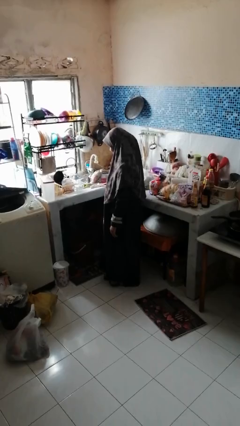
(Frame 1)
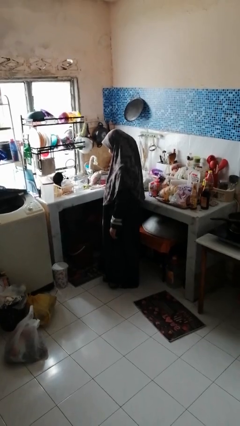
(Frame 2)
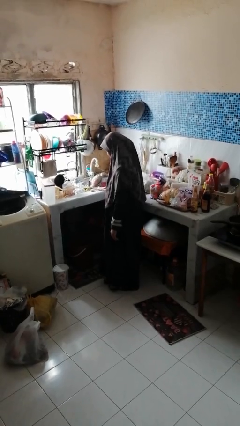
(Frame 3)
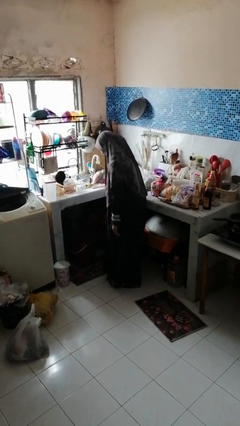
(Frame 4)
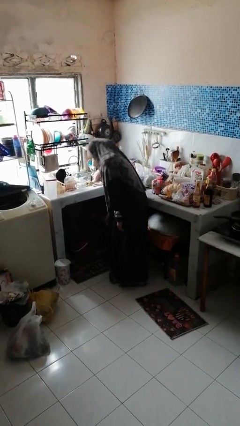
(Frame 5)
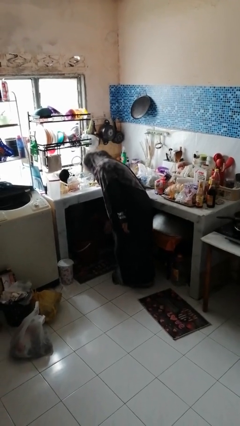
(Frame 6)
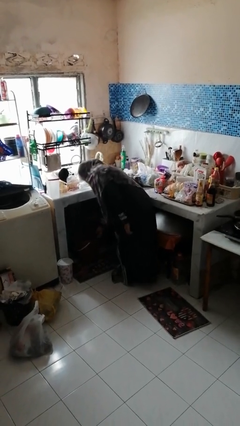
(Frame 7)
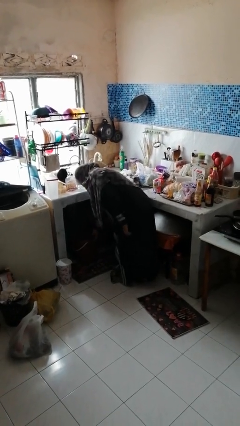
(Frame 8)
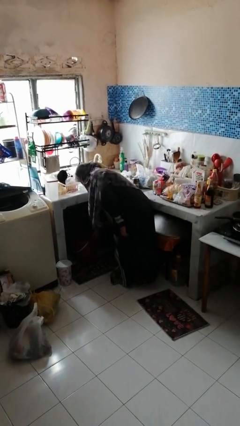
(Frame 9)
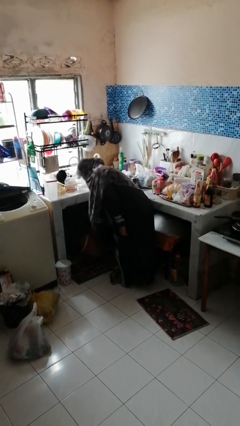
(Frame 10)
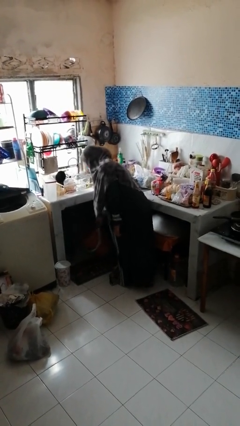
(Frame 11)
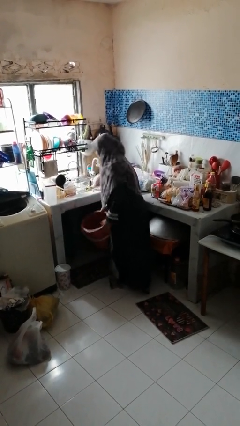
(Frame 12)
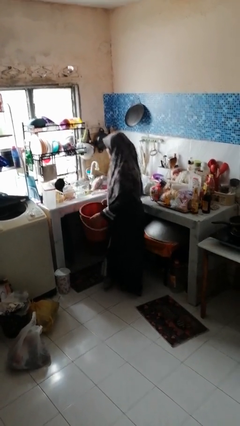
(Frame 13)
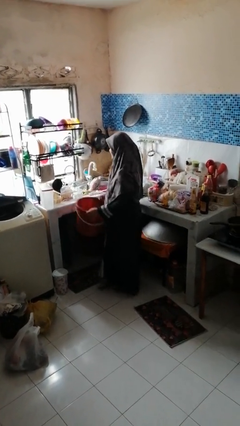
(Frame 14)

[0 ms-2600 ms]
person picks up object from cabinet

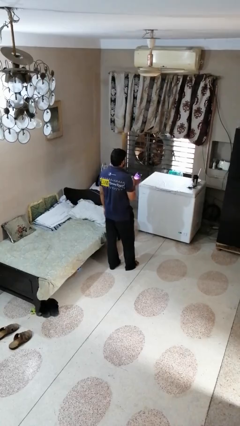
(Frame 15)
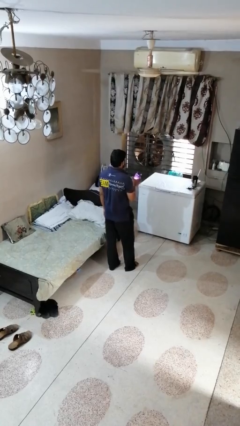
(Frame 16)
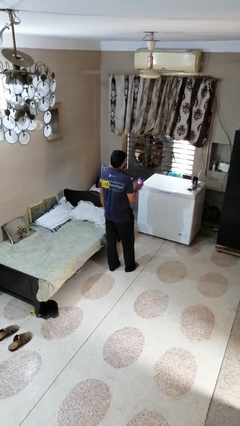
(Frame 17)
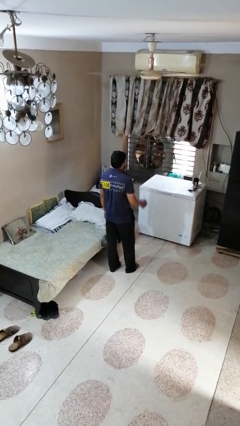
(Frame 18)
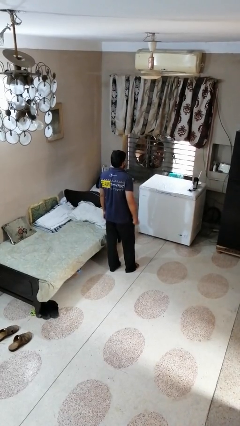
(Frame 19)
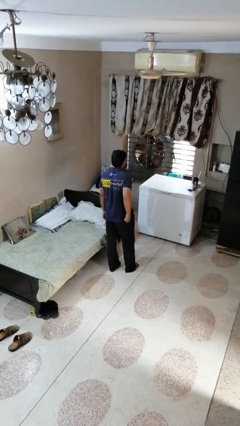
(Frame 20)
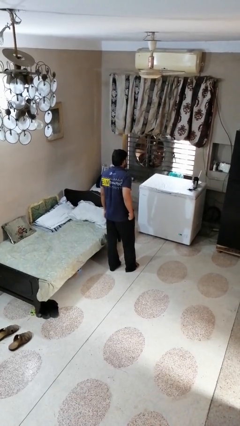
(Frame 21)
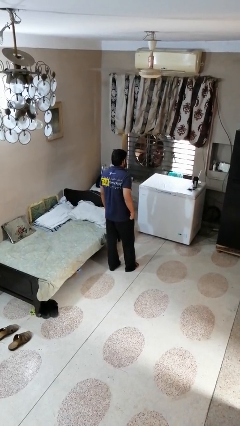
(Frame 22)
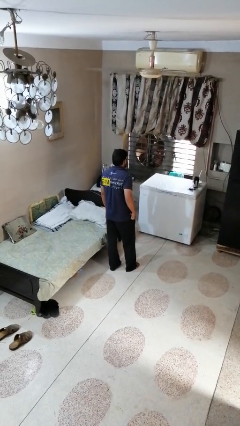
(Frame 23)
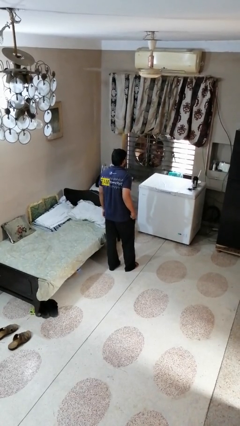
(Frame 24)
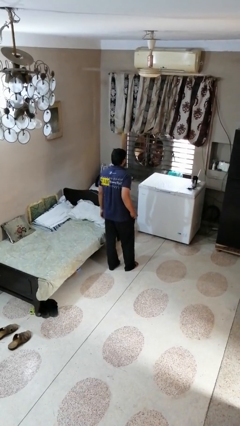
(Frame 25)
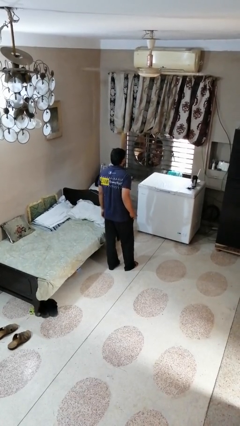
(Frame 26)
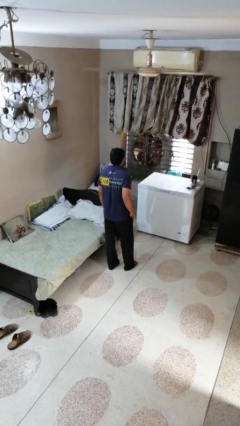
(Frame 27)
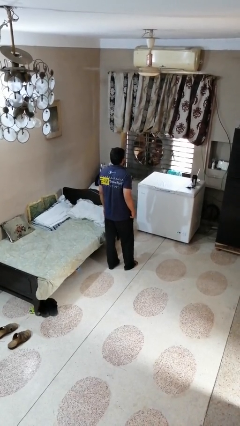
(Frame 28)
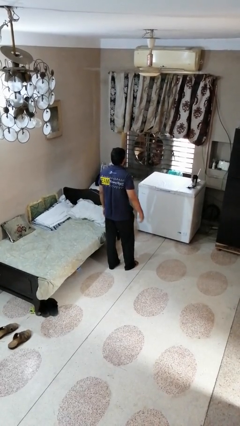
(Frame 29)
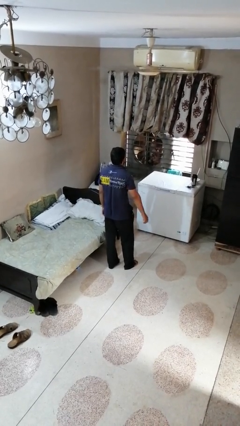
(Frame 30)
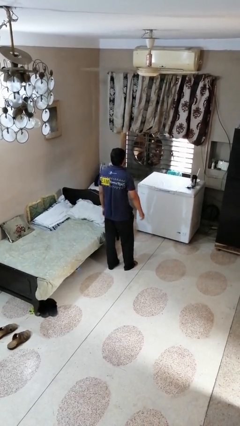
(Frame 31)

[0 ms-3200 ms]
person puts phone into pocket

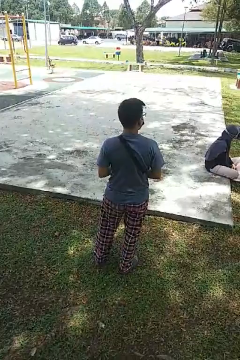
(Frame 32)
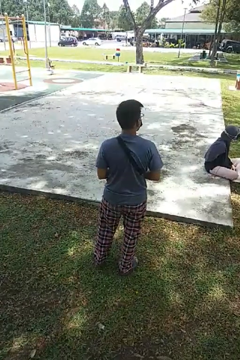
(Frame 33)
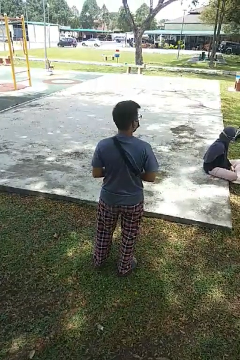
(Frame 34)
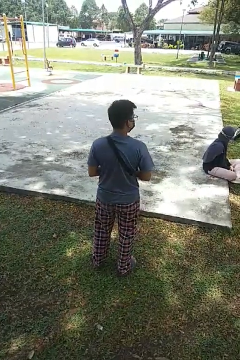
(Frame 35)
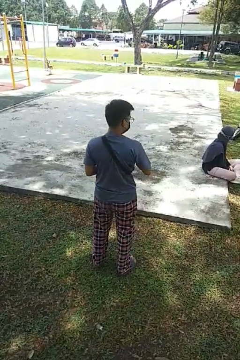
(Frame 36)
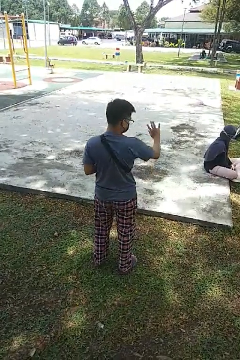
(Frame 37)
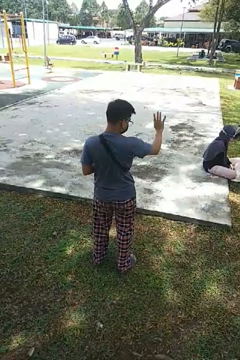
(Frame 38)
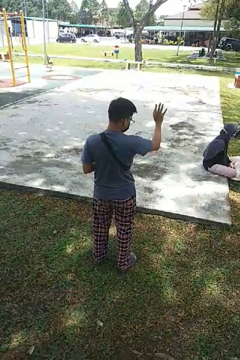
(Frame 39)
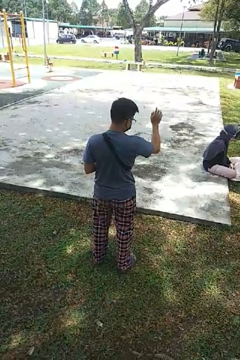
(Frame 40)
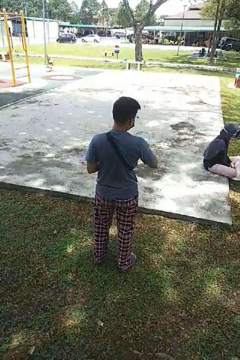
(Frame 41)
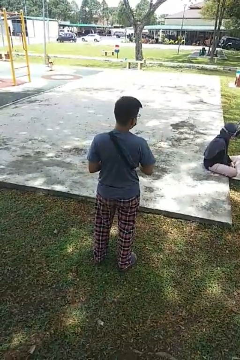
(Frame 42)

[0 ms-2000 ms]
person waves at person

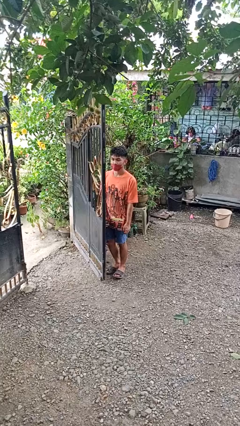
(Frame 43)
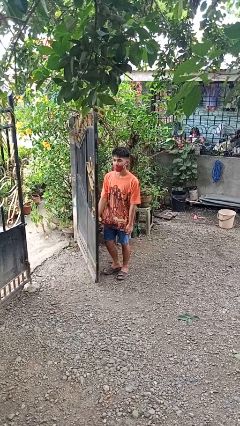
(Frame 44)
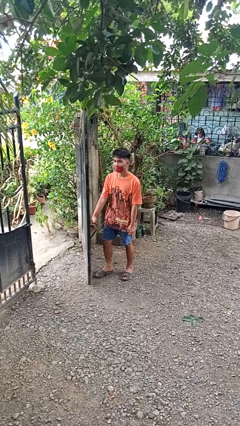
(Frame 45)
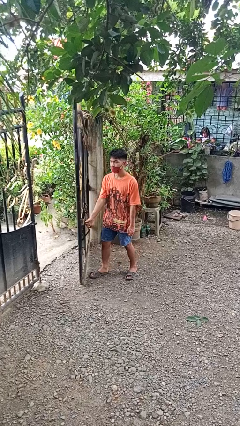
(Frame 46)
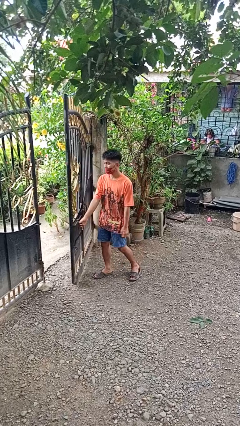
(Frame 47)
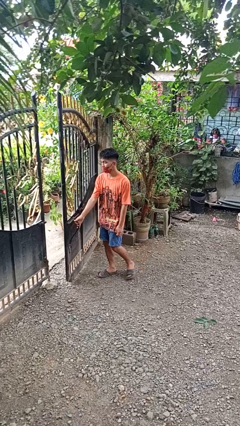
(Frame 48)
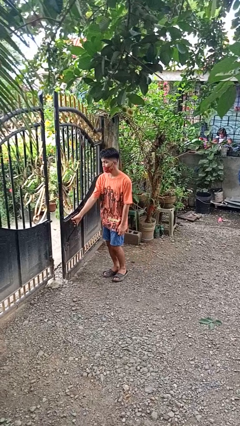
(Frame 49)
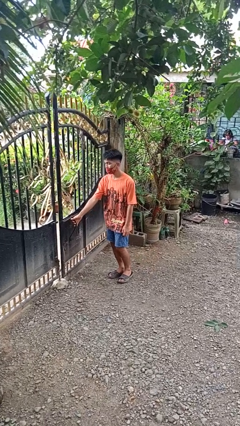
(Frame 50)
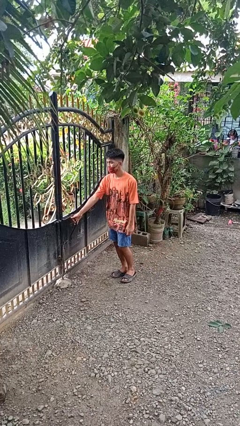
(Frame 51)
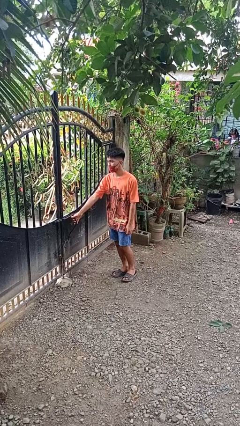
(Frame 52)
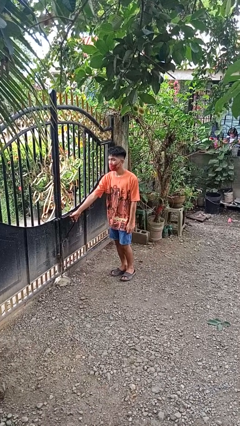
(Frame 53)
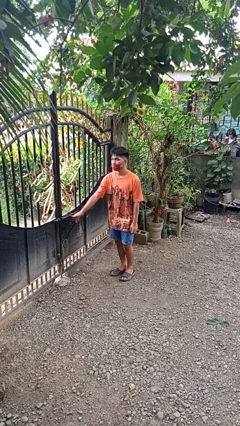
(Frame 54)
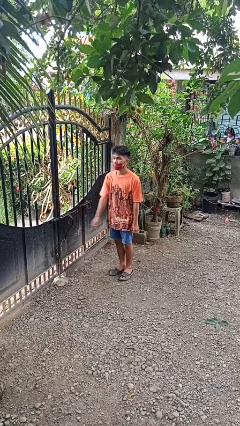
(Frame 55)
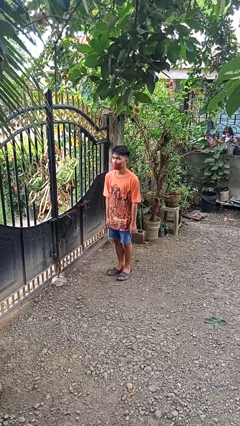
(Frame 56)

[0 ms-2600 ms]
person closes gate

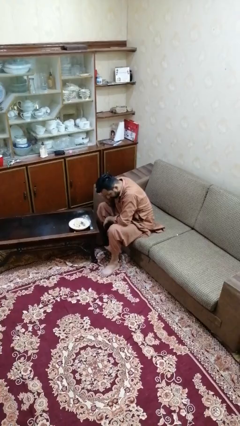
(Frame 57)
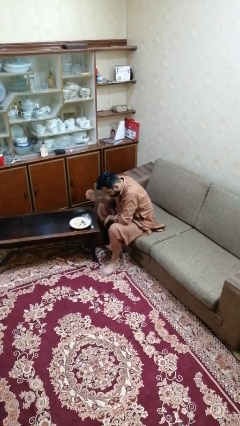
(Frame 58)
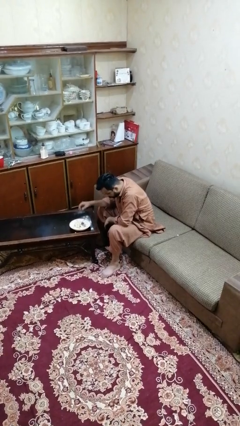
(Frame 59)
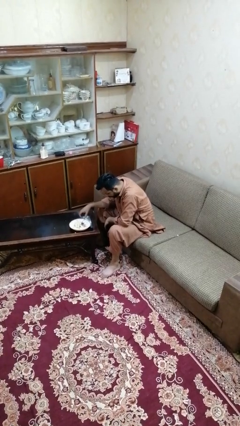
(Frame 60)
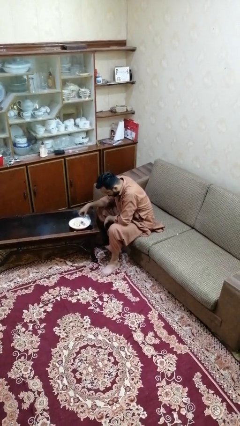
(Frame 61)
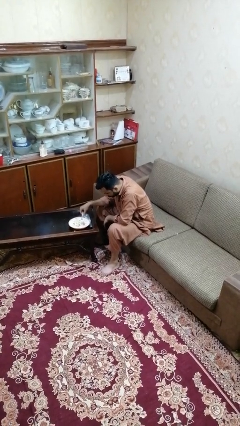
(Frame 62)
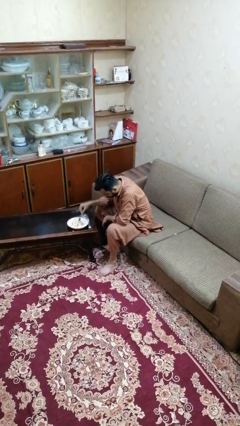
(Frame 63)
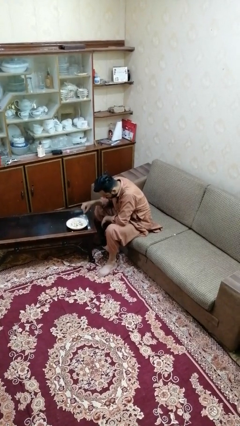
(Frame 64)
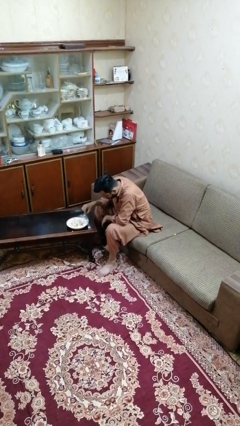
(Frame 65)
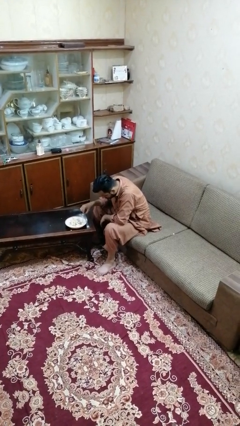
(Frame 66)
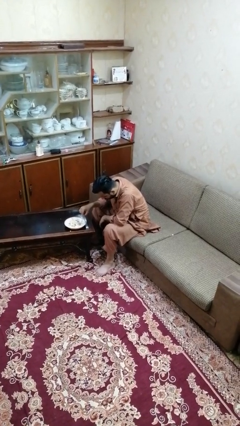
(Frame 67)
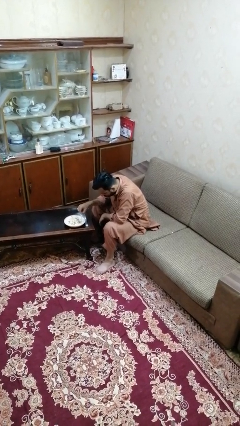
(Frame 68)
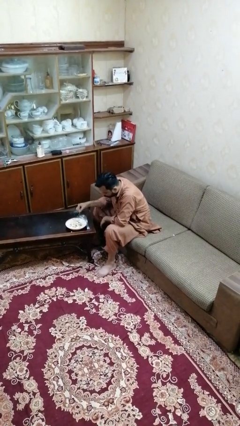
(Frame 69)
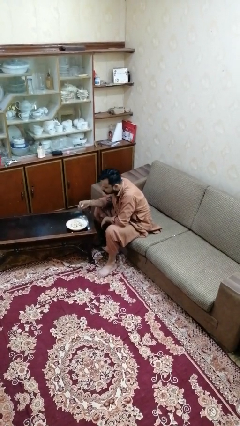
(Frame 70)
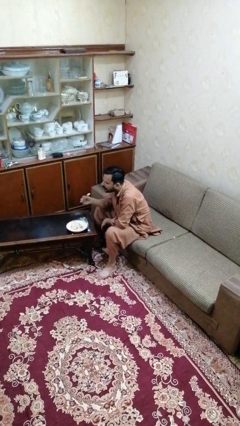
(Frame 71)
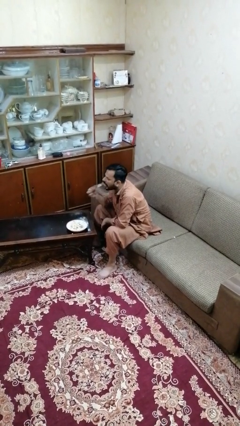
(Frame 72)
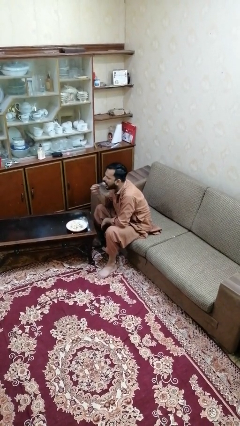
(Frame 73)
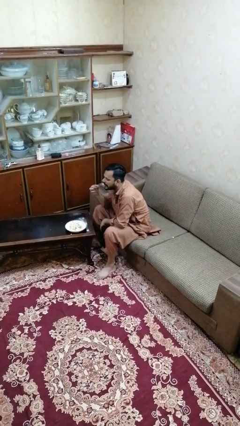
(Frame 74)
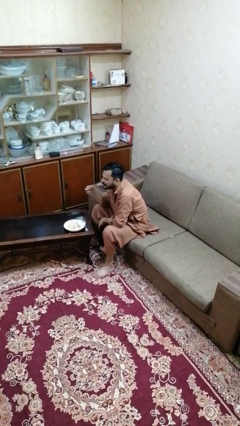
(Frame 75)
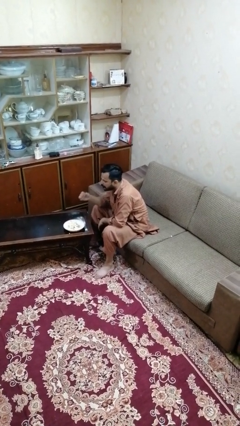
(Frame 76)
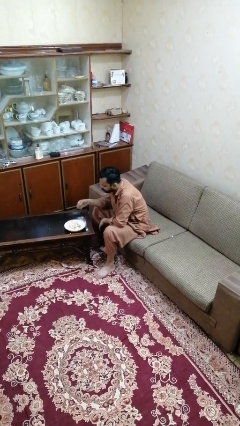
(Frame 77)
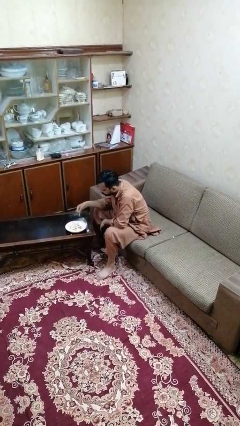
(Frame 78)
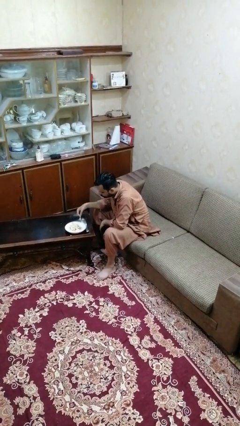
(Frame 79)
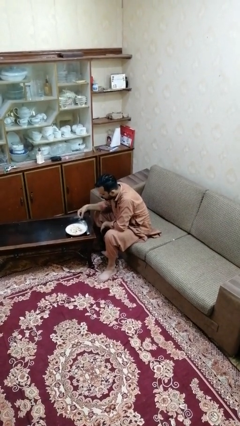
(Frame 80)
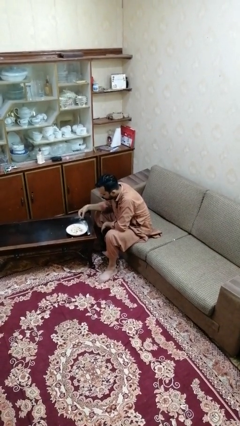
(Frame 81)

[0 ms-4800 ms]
person eats with utensil

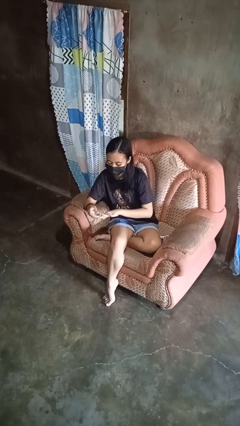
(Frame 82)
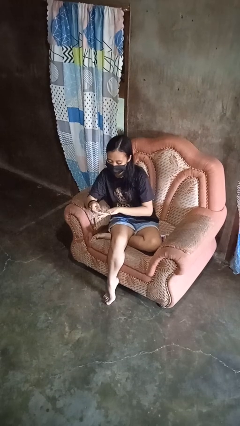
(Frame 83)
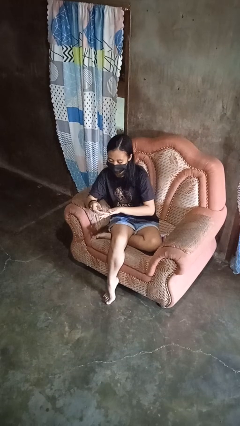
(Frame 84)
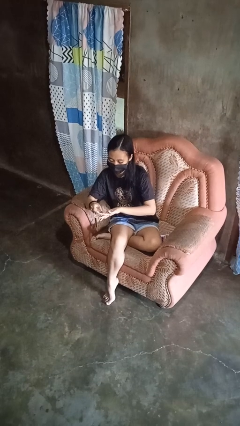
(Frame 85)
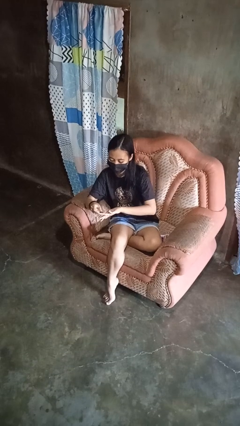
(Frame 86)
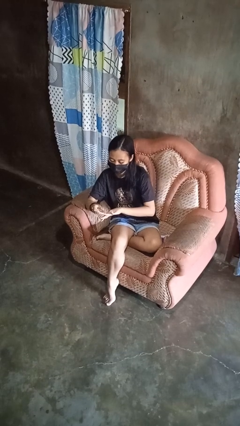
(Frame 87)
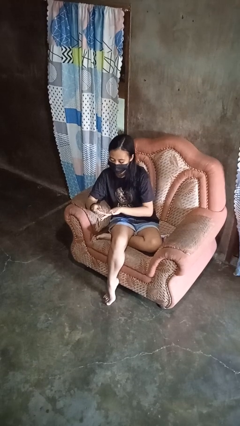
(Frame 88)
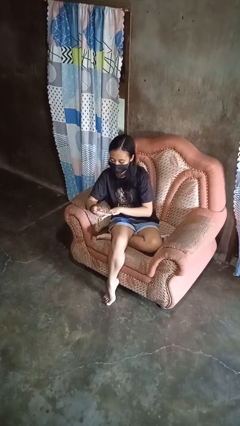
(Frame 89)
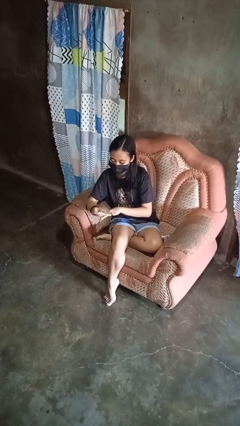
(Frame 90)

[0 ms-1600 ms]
person clips fingernails

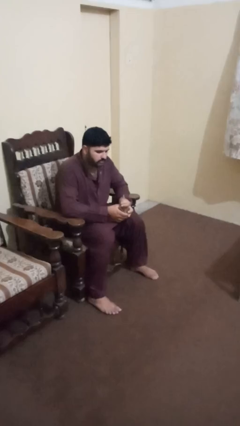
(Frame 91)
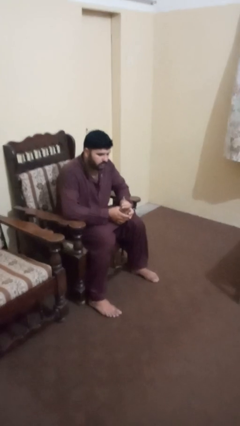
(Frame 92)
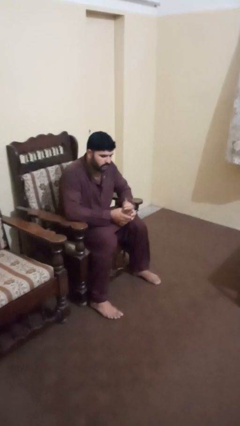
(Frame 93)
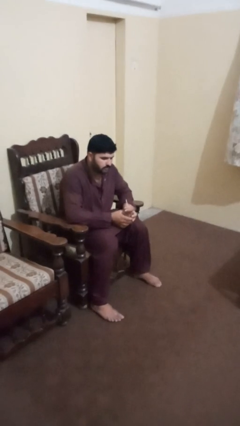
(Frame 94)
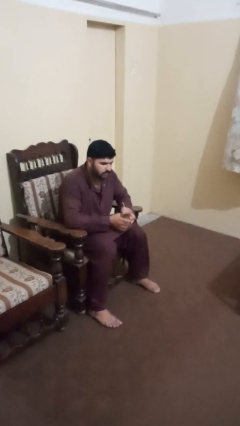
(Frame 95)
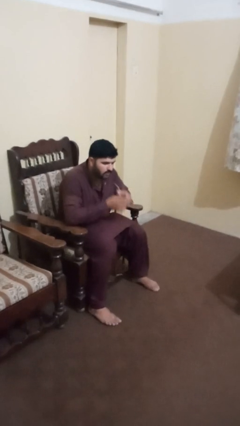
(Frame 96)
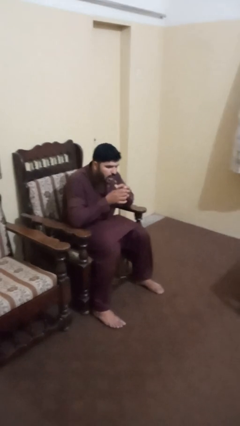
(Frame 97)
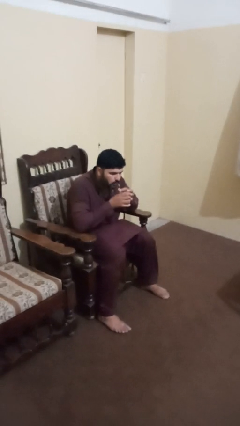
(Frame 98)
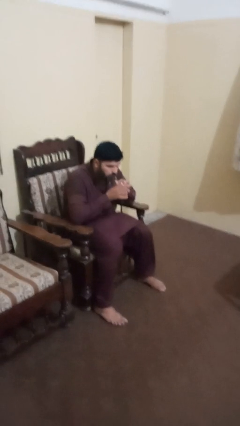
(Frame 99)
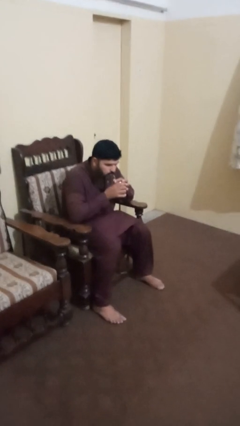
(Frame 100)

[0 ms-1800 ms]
person drinks from straw
